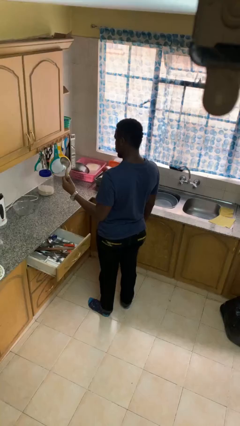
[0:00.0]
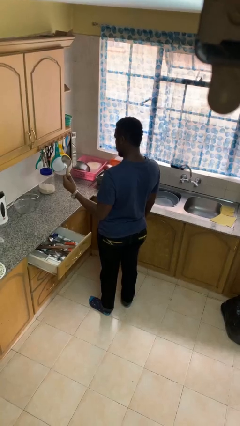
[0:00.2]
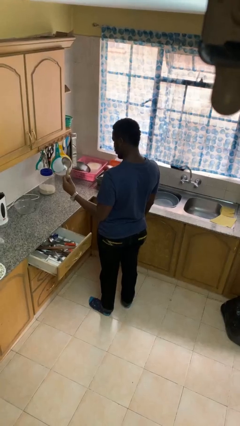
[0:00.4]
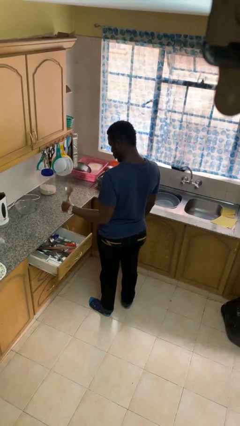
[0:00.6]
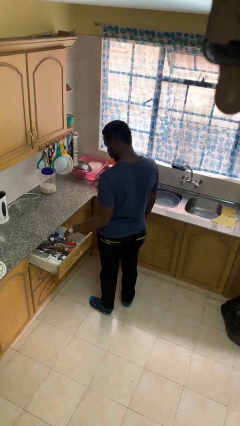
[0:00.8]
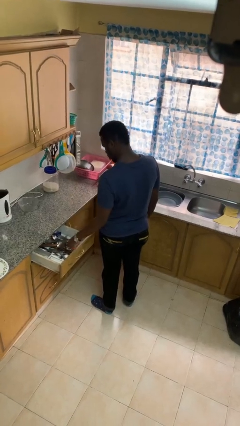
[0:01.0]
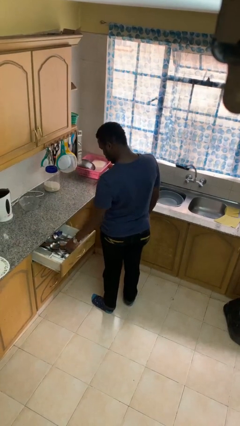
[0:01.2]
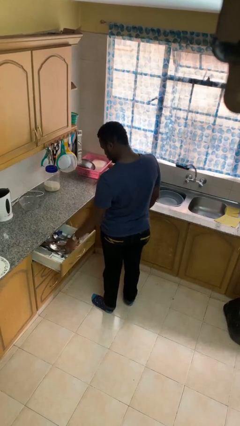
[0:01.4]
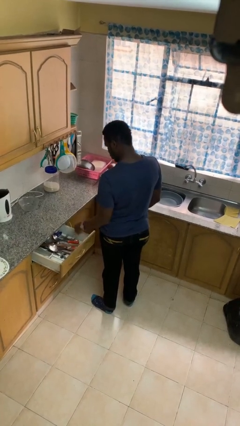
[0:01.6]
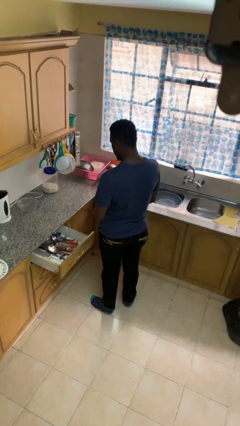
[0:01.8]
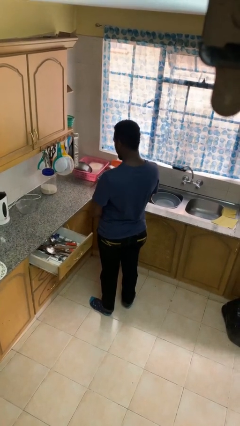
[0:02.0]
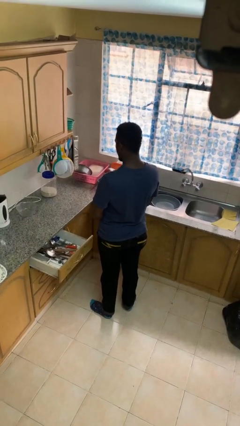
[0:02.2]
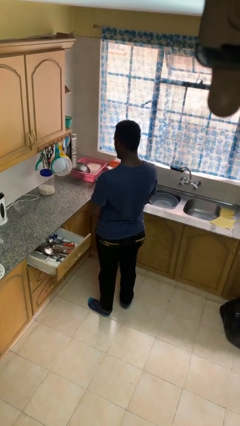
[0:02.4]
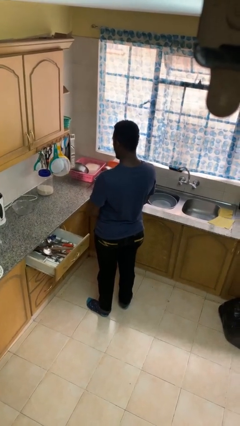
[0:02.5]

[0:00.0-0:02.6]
person puts object into kitchen drawer

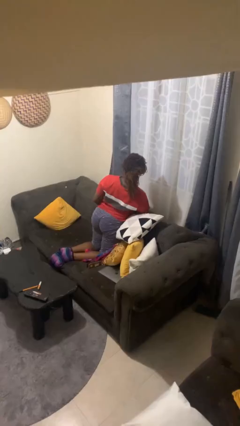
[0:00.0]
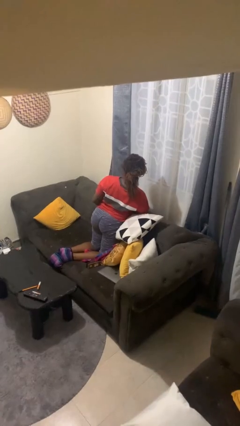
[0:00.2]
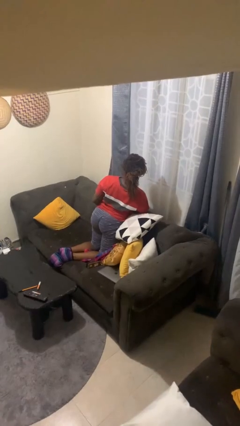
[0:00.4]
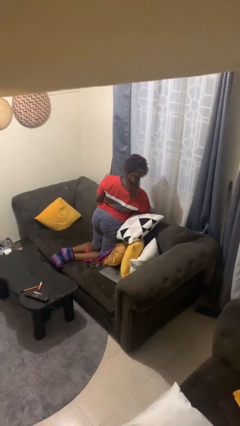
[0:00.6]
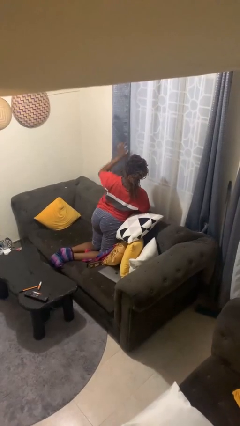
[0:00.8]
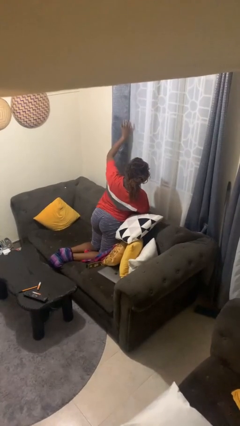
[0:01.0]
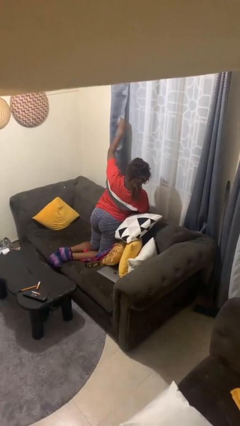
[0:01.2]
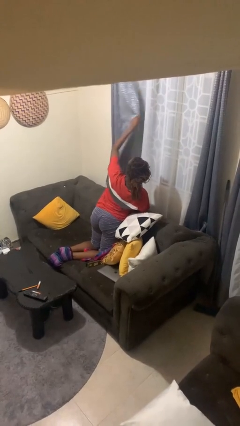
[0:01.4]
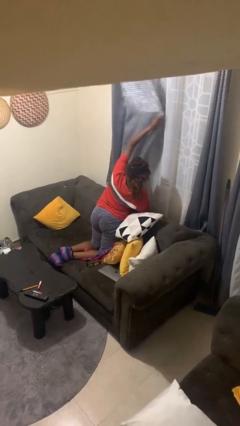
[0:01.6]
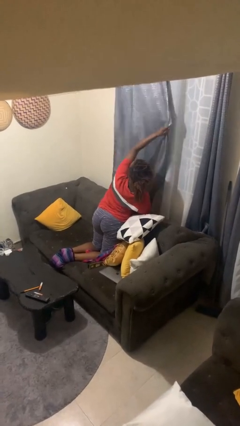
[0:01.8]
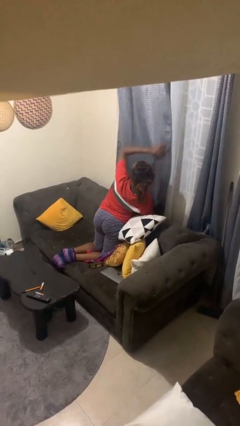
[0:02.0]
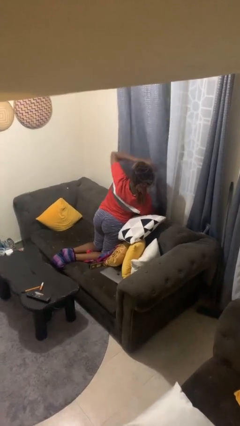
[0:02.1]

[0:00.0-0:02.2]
person closes curtains

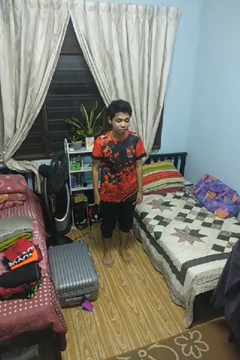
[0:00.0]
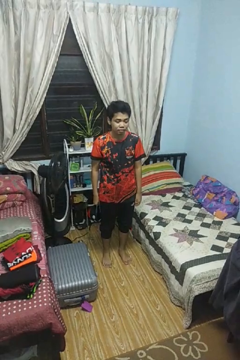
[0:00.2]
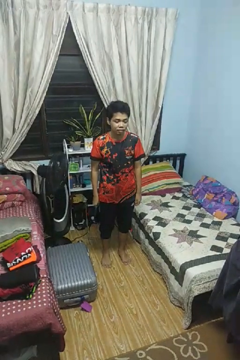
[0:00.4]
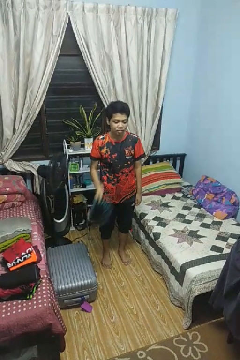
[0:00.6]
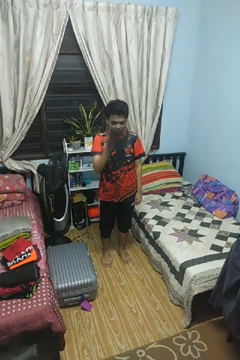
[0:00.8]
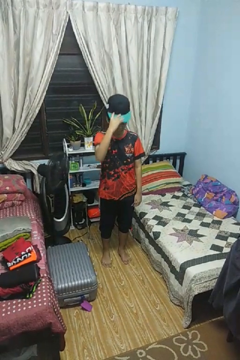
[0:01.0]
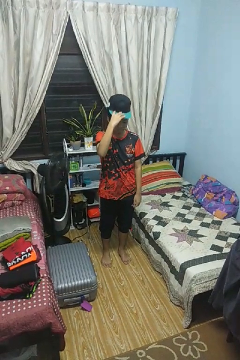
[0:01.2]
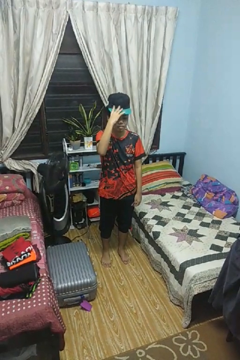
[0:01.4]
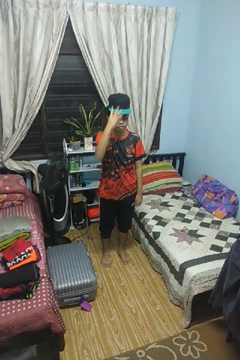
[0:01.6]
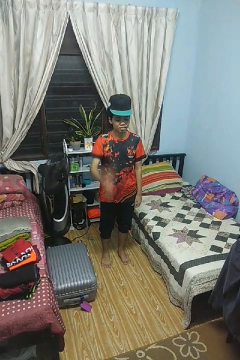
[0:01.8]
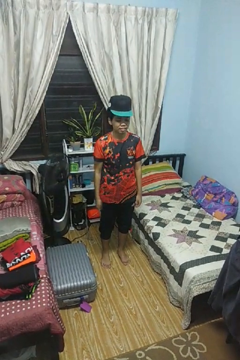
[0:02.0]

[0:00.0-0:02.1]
person puts on hat

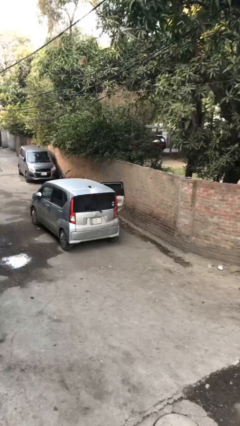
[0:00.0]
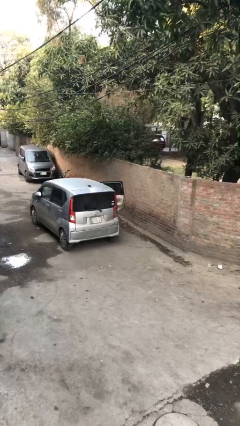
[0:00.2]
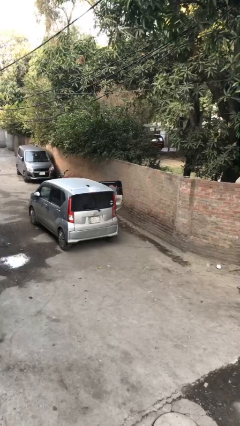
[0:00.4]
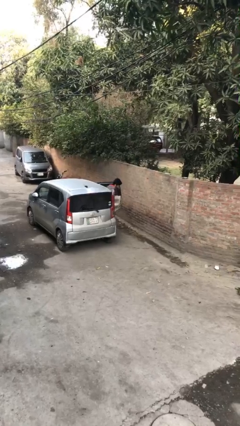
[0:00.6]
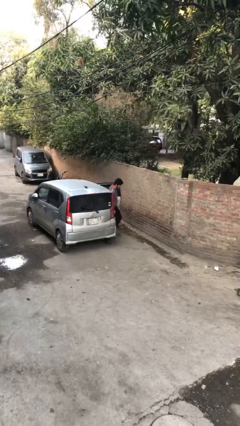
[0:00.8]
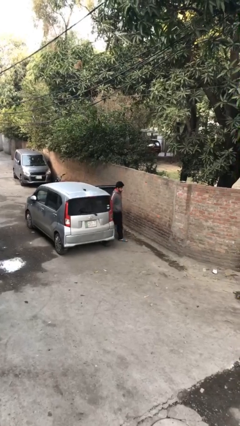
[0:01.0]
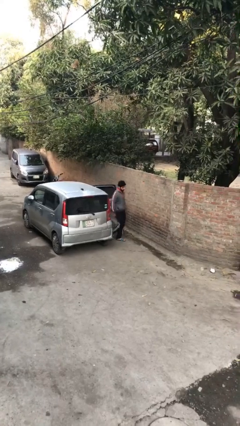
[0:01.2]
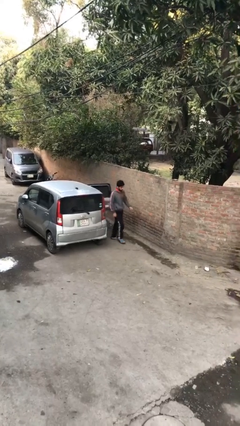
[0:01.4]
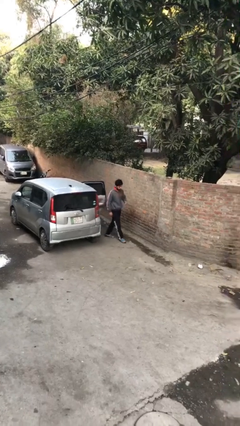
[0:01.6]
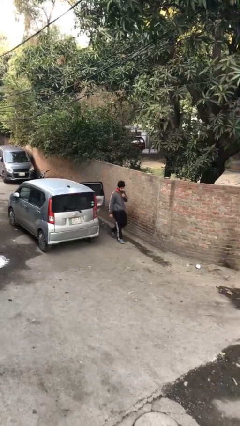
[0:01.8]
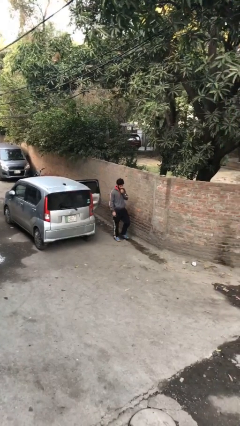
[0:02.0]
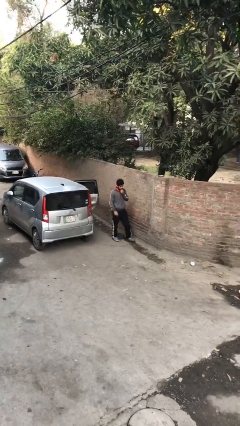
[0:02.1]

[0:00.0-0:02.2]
person exits car

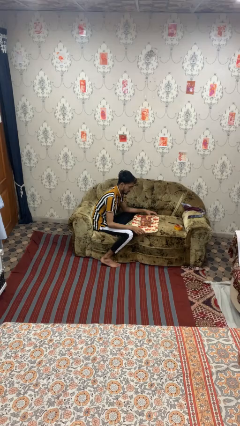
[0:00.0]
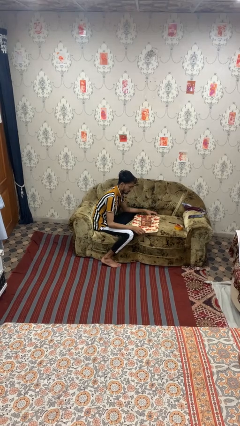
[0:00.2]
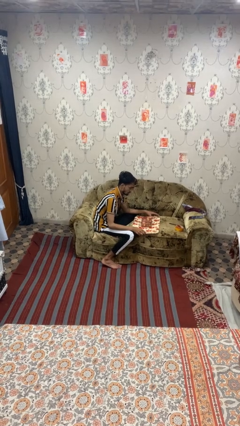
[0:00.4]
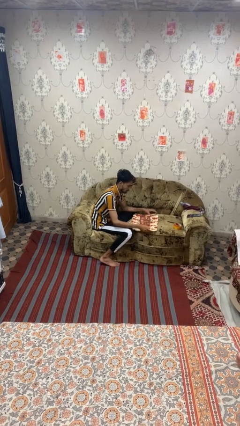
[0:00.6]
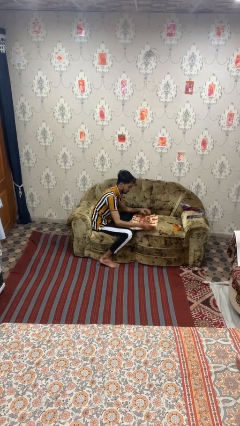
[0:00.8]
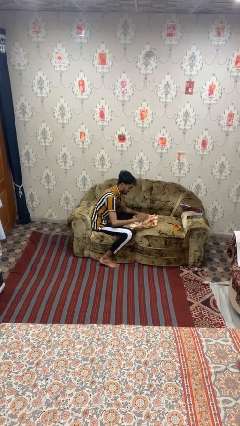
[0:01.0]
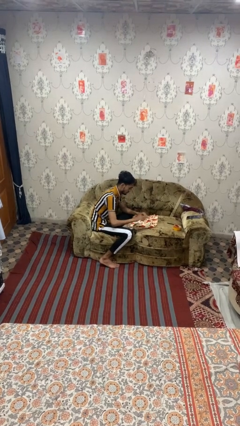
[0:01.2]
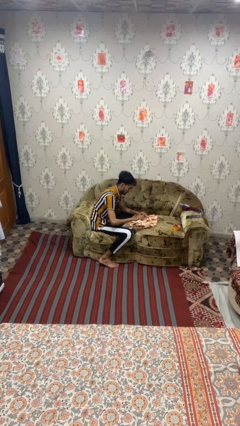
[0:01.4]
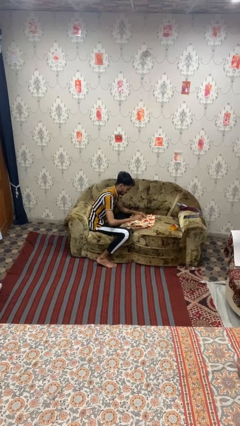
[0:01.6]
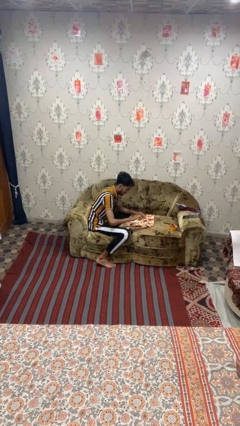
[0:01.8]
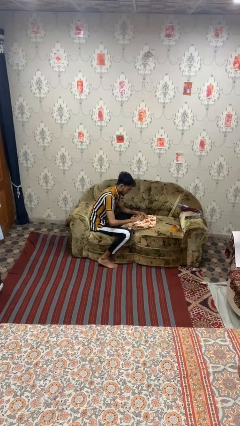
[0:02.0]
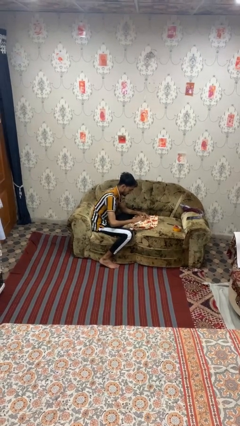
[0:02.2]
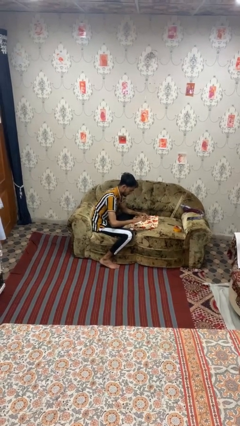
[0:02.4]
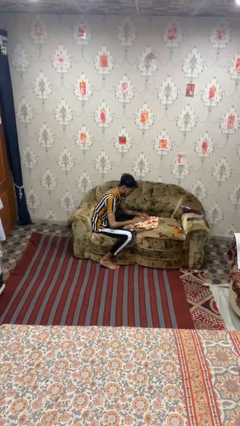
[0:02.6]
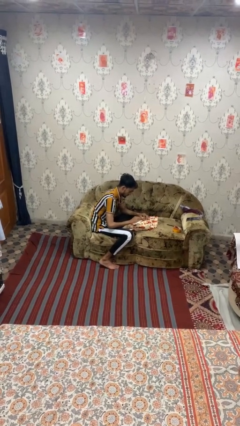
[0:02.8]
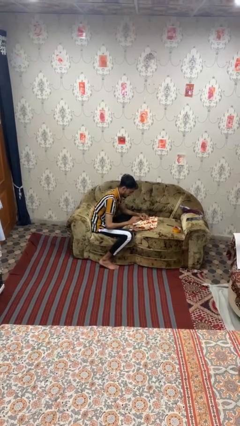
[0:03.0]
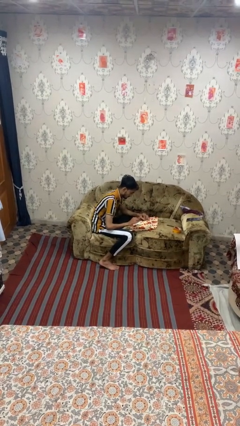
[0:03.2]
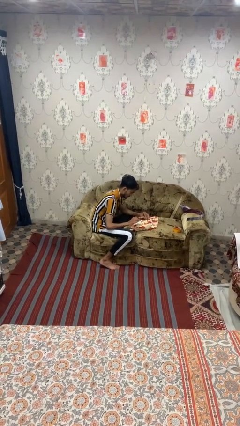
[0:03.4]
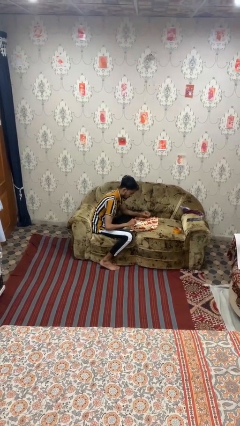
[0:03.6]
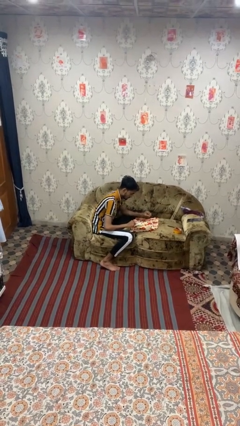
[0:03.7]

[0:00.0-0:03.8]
person wraps box

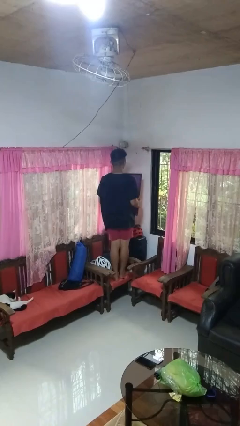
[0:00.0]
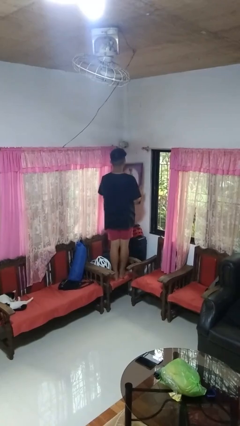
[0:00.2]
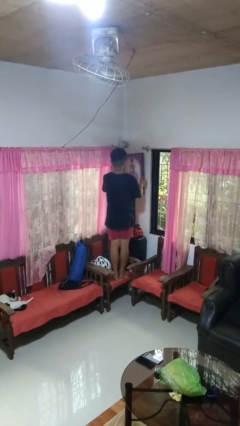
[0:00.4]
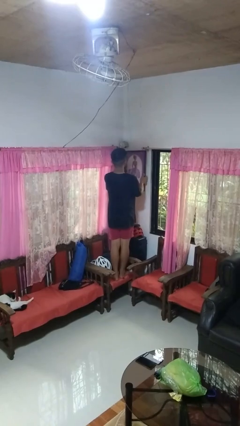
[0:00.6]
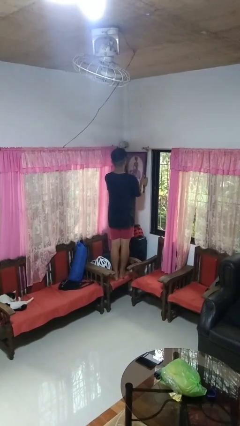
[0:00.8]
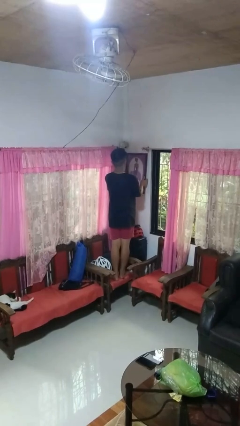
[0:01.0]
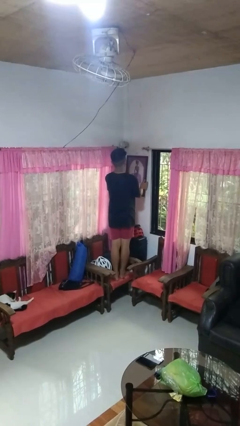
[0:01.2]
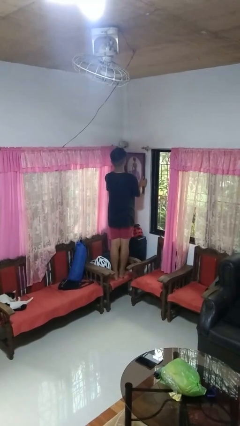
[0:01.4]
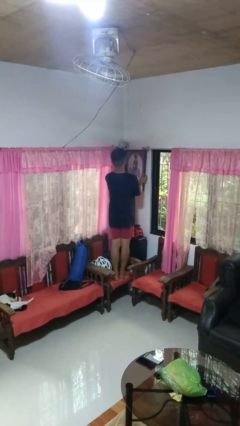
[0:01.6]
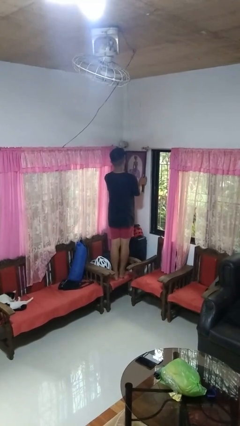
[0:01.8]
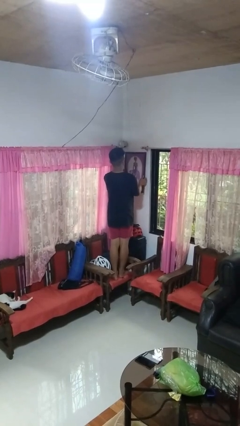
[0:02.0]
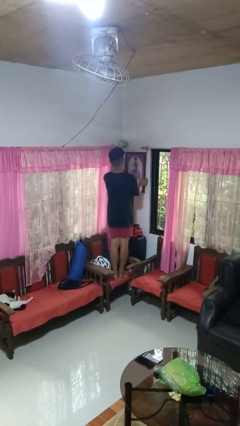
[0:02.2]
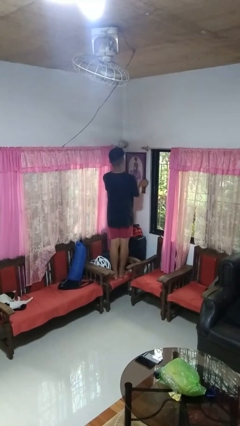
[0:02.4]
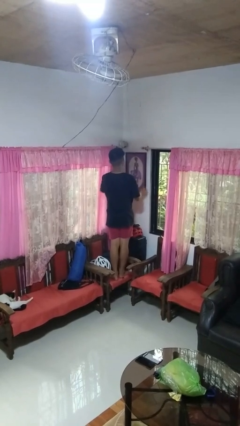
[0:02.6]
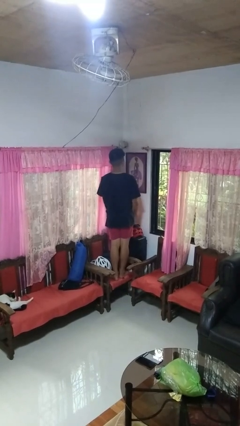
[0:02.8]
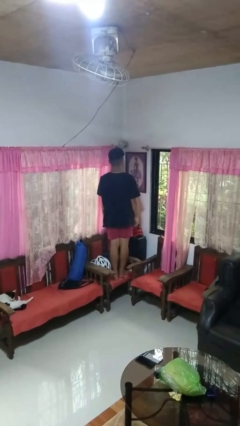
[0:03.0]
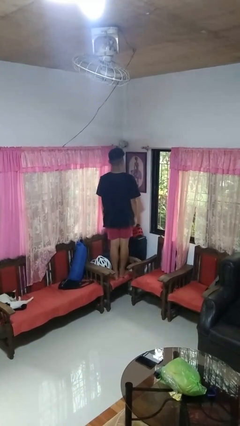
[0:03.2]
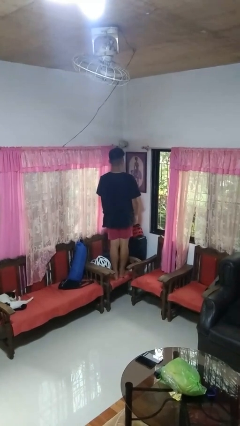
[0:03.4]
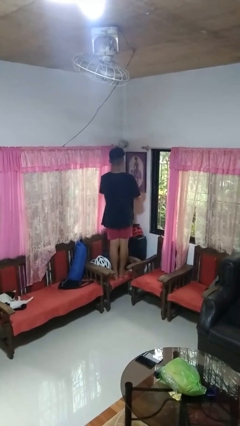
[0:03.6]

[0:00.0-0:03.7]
person puts up picture frame

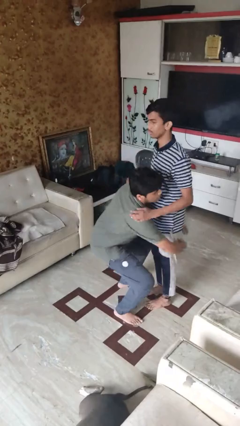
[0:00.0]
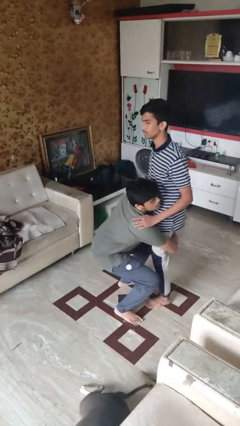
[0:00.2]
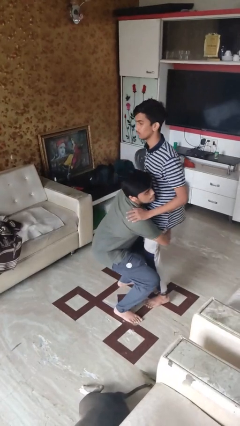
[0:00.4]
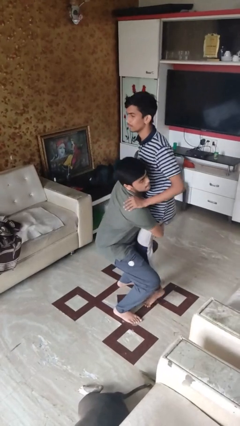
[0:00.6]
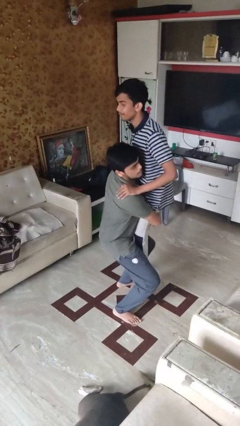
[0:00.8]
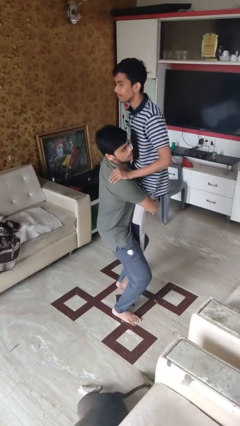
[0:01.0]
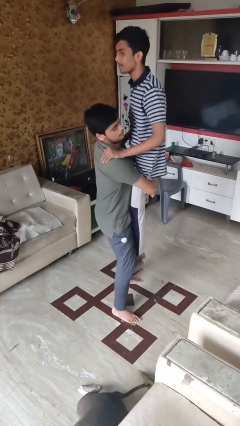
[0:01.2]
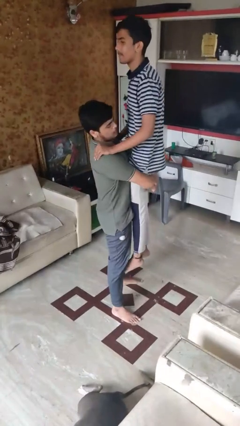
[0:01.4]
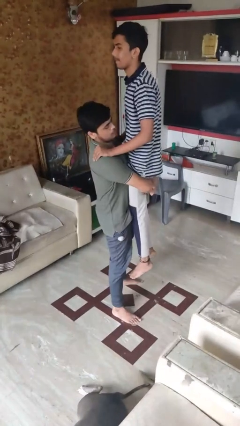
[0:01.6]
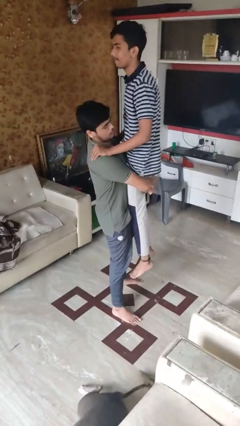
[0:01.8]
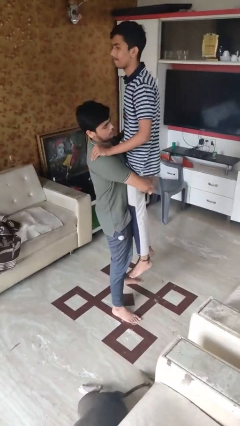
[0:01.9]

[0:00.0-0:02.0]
person picks up person
